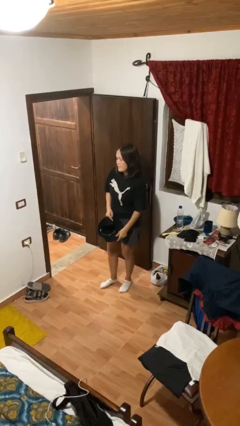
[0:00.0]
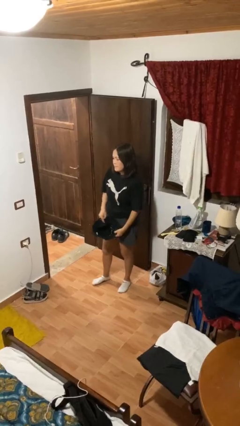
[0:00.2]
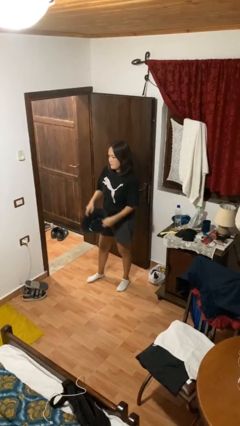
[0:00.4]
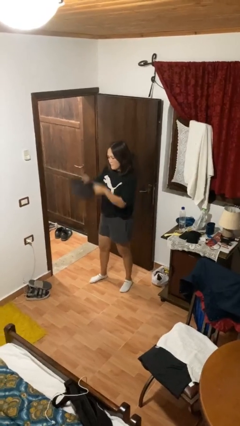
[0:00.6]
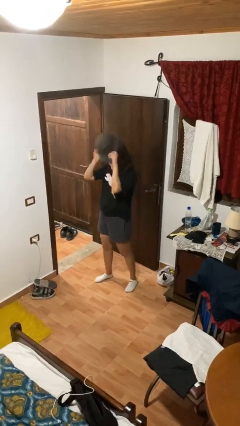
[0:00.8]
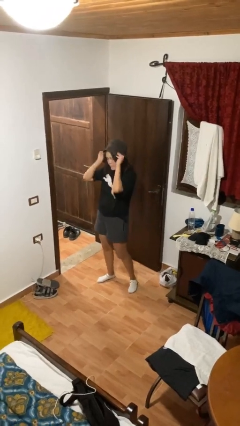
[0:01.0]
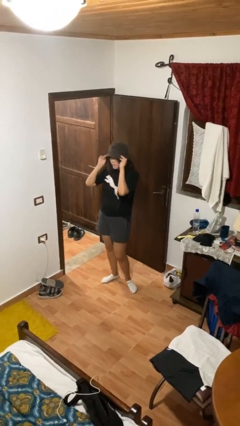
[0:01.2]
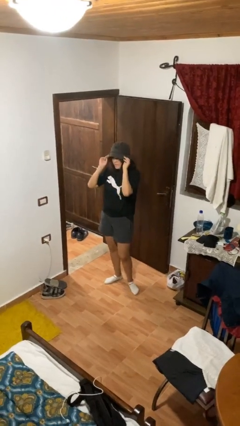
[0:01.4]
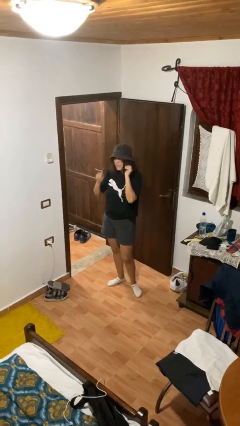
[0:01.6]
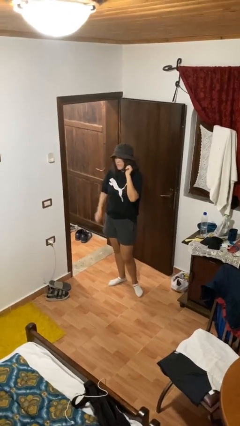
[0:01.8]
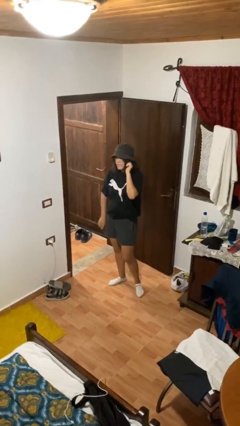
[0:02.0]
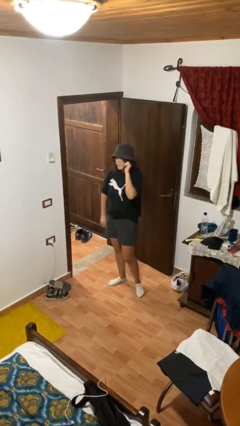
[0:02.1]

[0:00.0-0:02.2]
person puts on hat

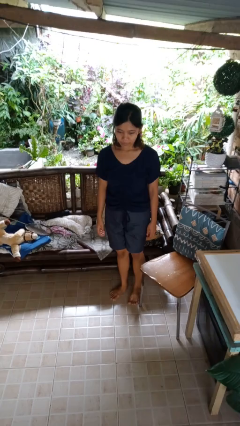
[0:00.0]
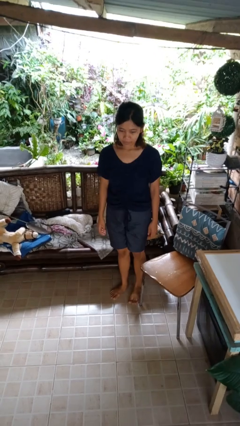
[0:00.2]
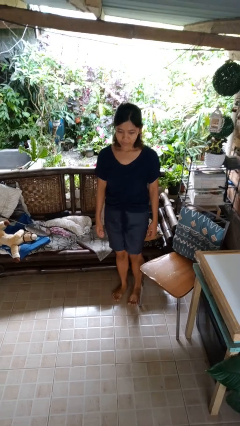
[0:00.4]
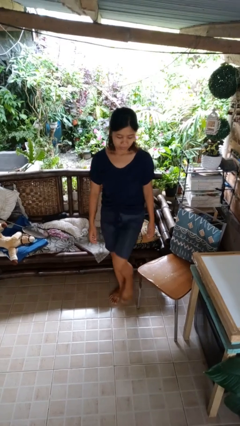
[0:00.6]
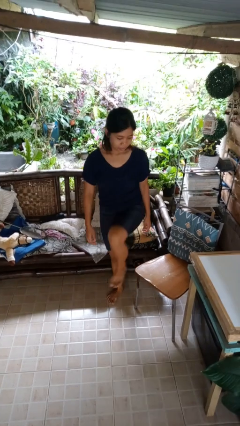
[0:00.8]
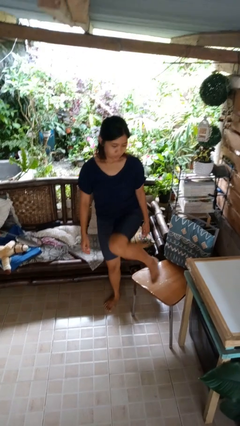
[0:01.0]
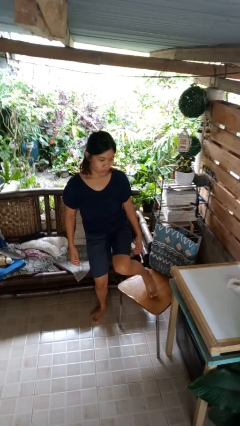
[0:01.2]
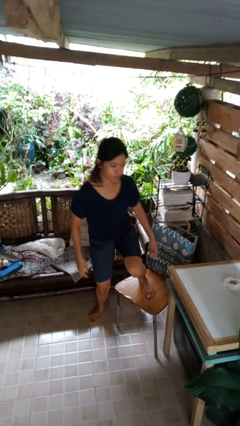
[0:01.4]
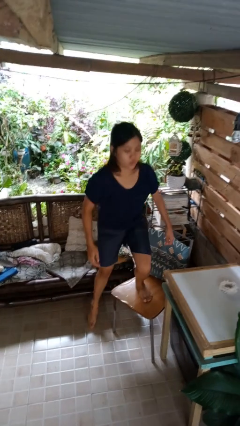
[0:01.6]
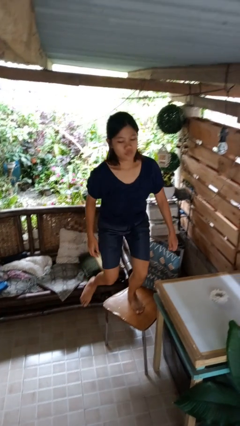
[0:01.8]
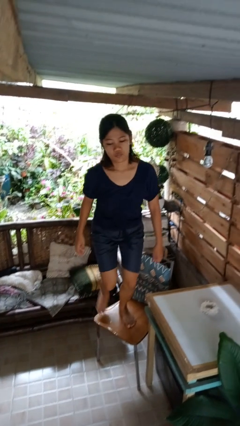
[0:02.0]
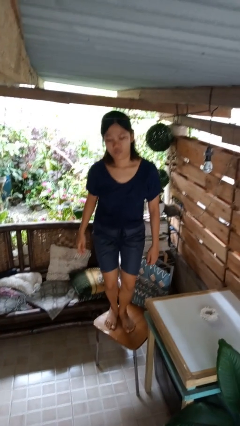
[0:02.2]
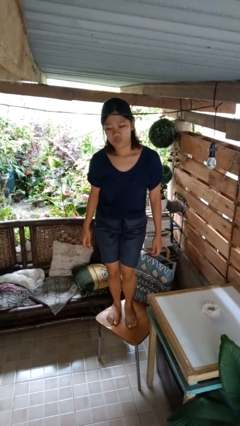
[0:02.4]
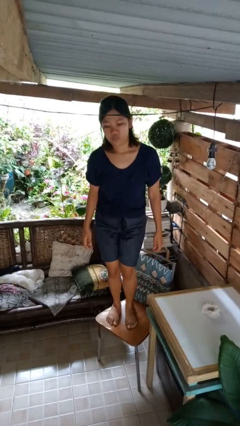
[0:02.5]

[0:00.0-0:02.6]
person climbs on chair

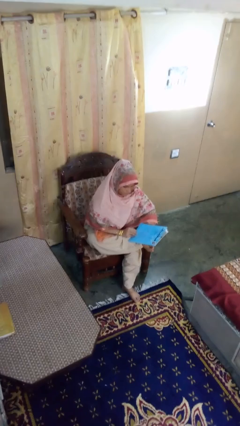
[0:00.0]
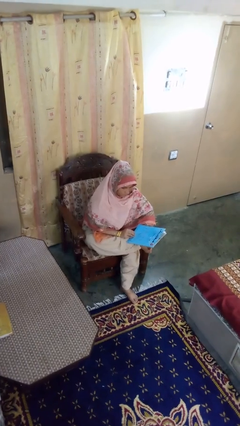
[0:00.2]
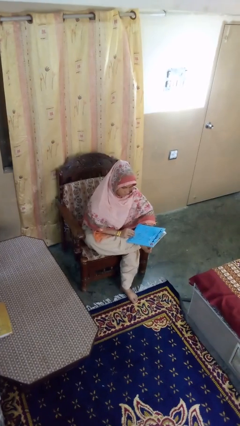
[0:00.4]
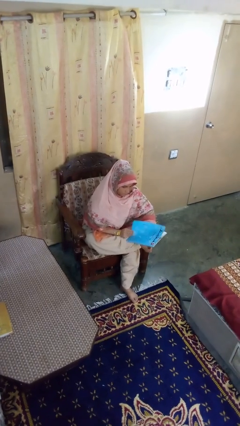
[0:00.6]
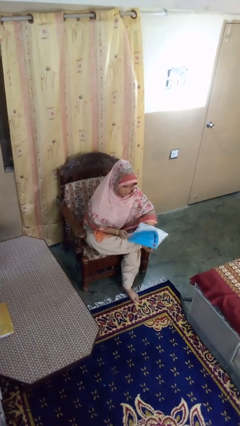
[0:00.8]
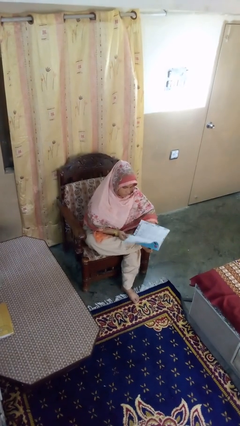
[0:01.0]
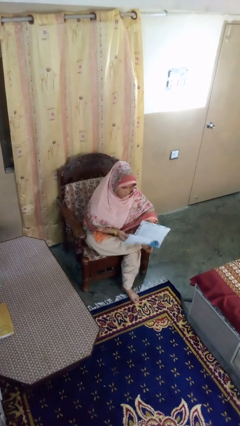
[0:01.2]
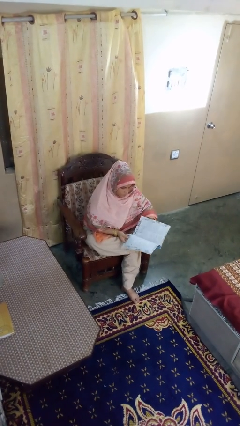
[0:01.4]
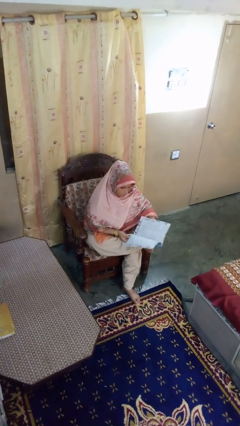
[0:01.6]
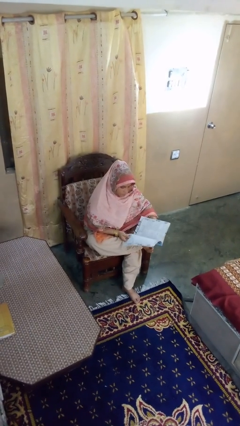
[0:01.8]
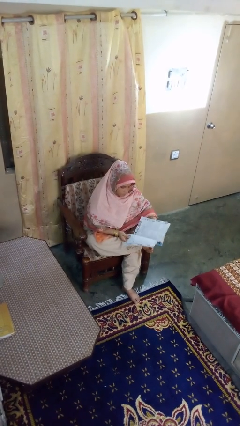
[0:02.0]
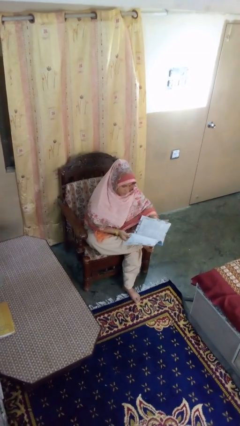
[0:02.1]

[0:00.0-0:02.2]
person reads magazine

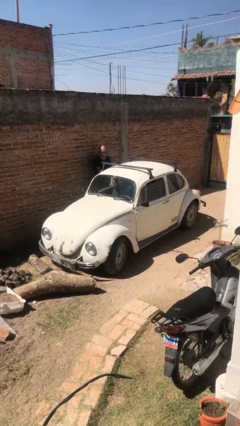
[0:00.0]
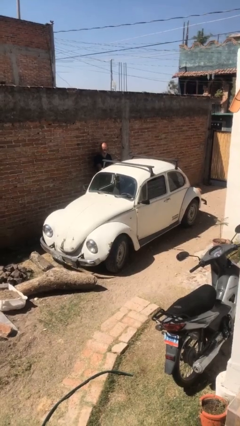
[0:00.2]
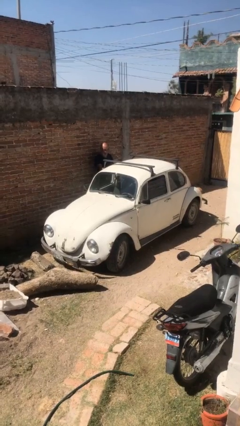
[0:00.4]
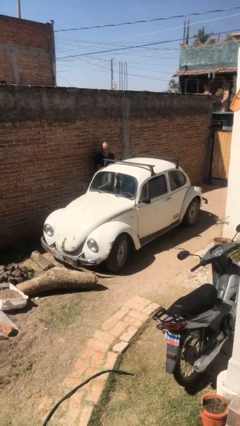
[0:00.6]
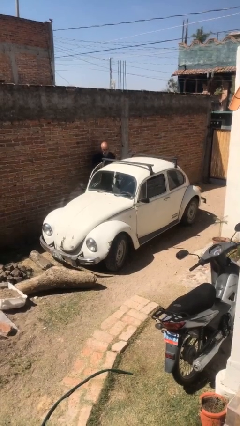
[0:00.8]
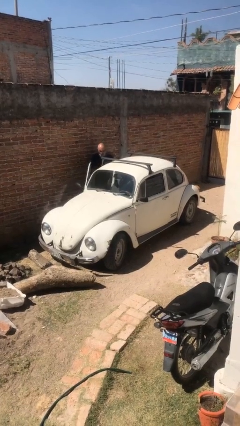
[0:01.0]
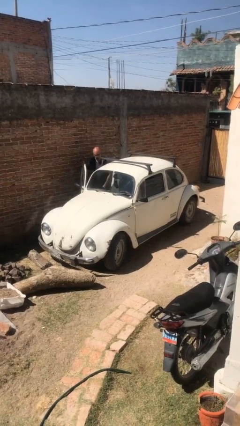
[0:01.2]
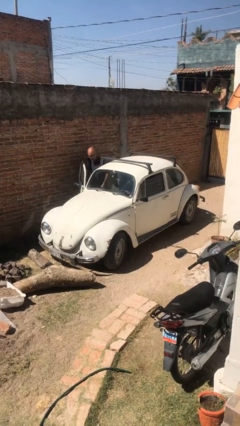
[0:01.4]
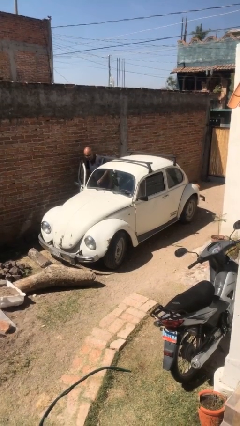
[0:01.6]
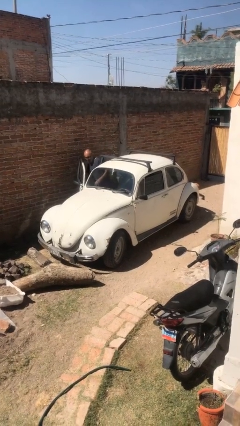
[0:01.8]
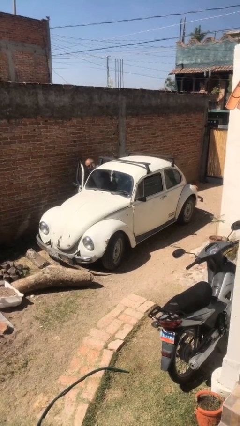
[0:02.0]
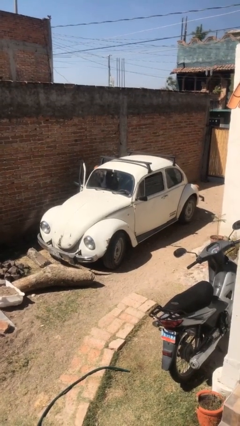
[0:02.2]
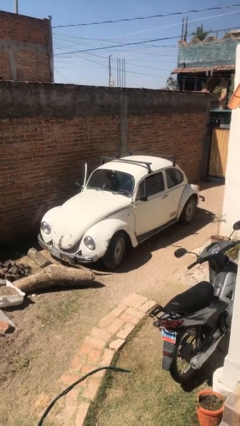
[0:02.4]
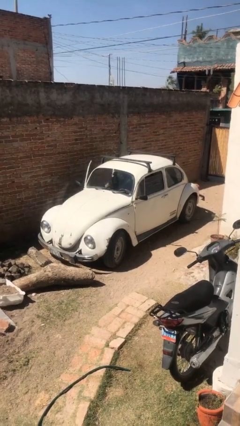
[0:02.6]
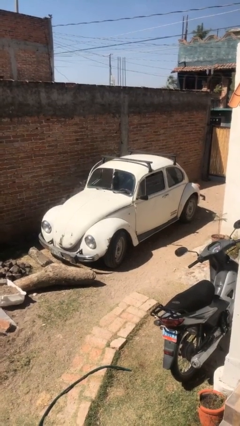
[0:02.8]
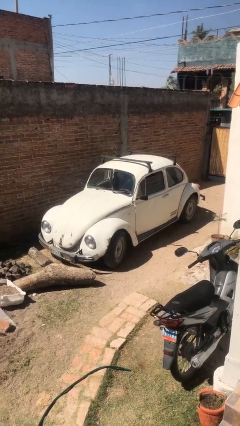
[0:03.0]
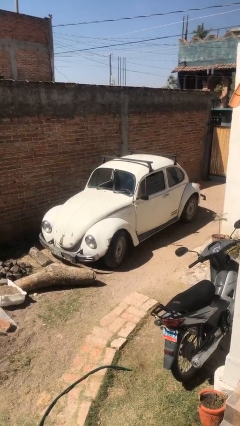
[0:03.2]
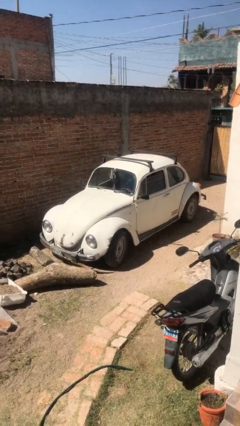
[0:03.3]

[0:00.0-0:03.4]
car picks up person

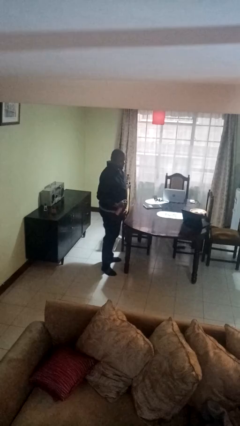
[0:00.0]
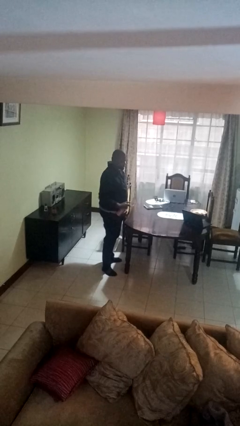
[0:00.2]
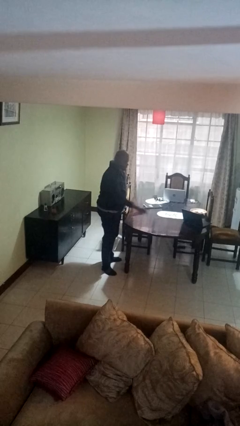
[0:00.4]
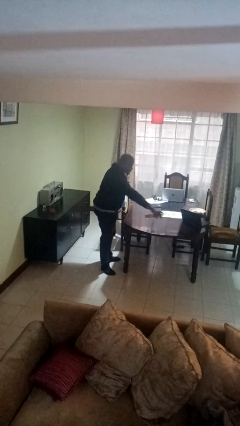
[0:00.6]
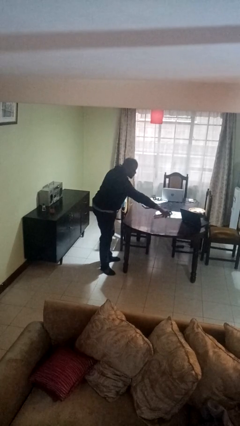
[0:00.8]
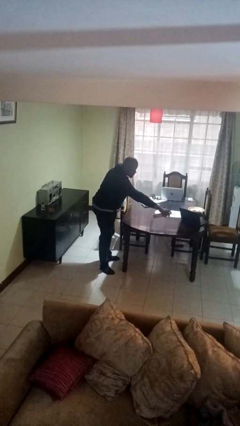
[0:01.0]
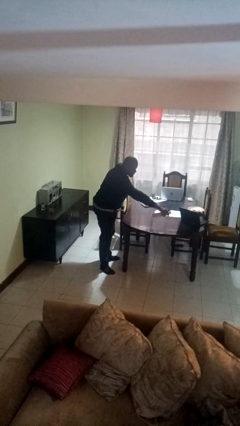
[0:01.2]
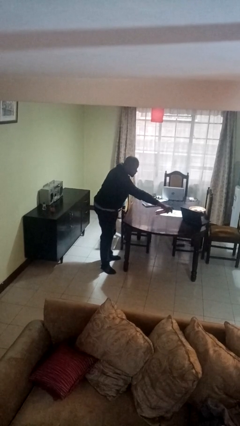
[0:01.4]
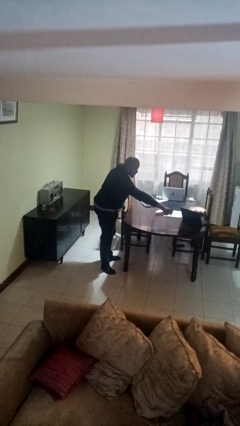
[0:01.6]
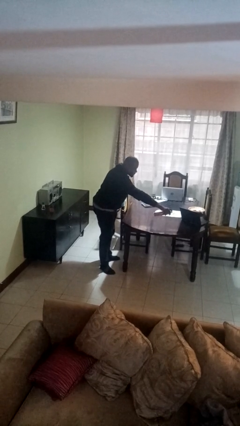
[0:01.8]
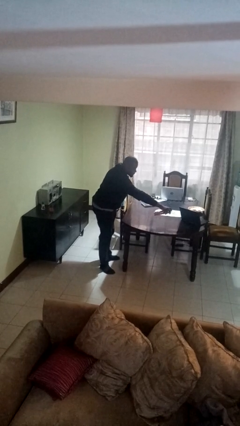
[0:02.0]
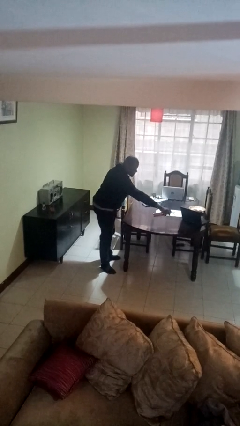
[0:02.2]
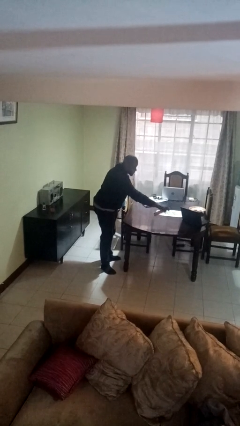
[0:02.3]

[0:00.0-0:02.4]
person sprays from bottle

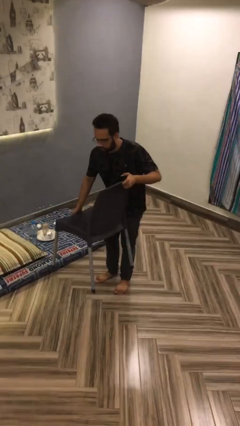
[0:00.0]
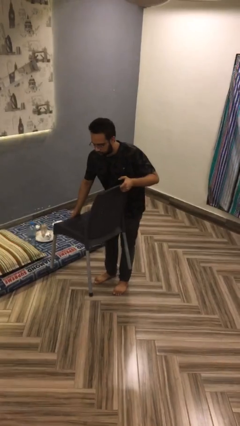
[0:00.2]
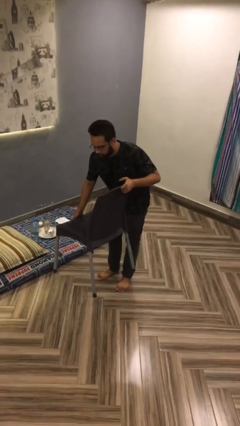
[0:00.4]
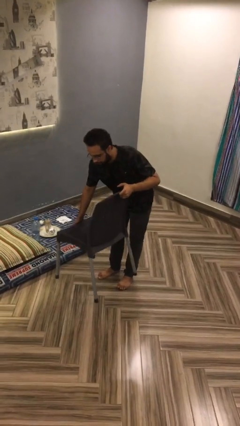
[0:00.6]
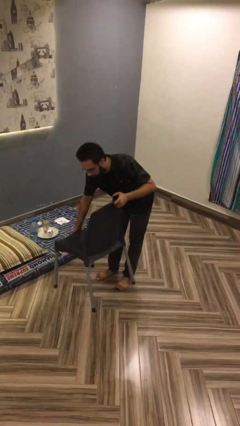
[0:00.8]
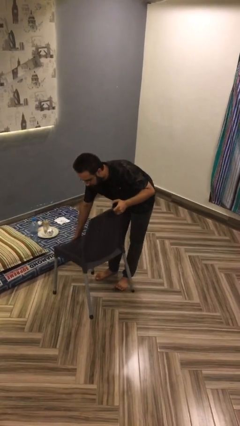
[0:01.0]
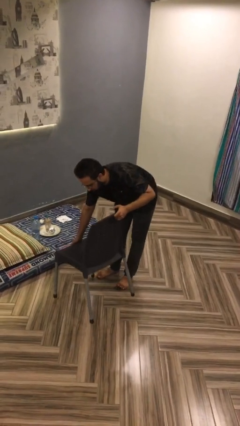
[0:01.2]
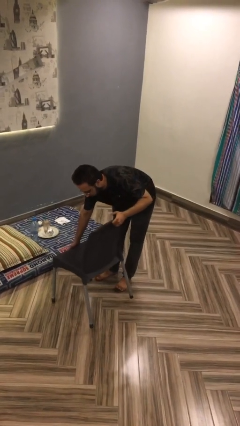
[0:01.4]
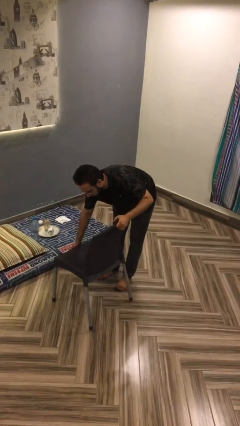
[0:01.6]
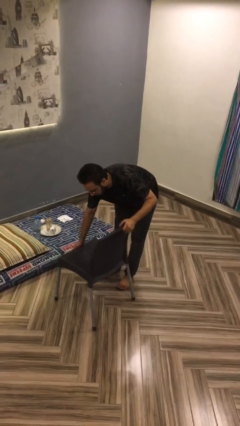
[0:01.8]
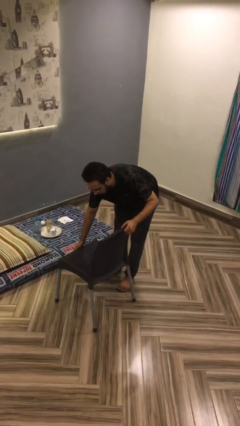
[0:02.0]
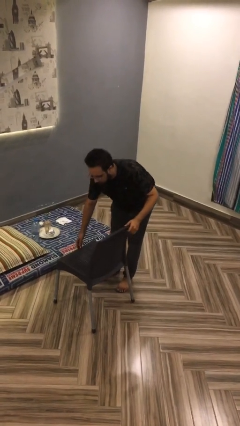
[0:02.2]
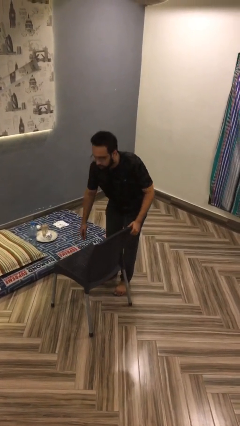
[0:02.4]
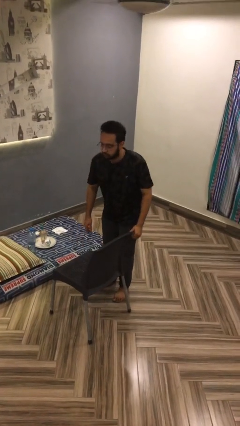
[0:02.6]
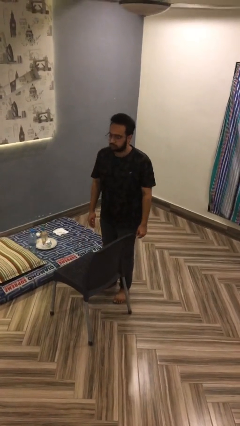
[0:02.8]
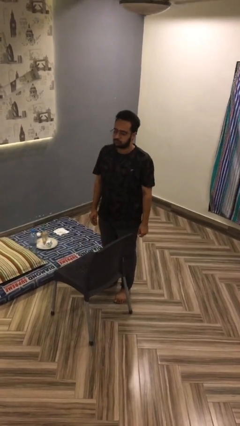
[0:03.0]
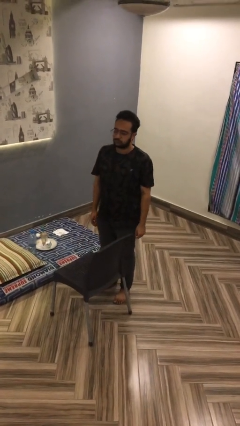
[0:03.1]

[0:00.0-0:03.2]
person puts down object on floor

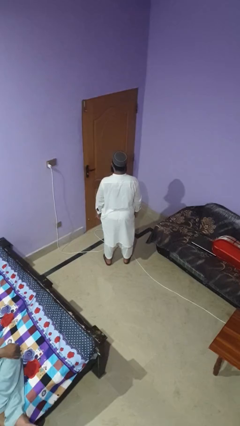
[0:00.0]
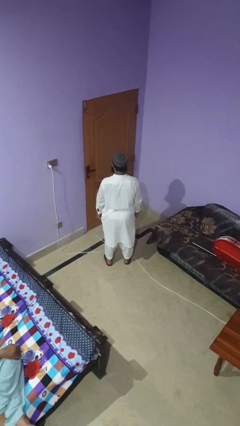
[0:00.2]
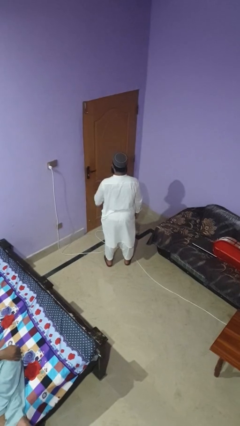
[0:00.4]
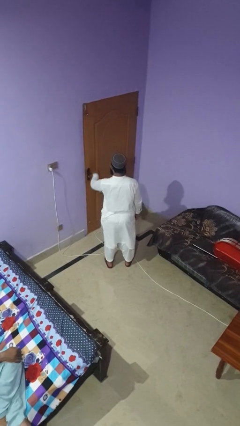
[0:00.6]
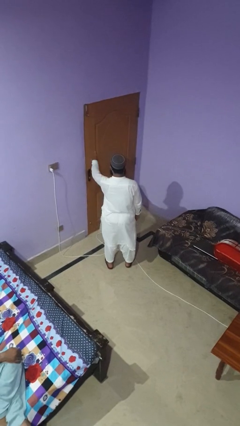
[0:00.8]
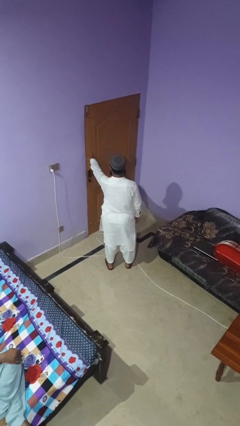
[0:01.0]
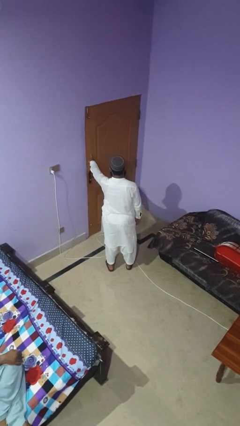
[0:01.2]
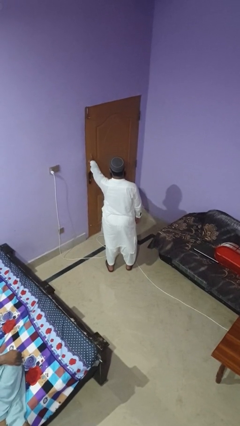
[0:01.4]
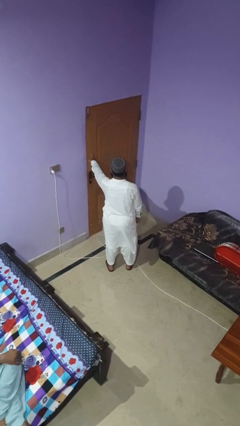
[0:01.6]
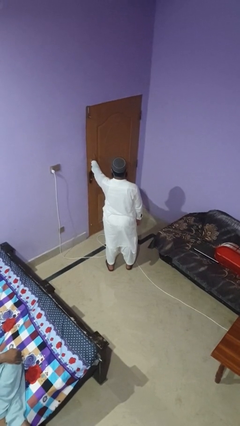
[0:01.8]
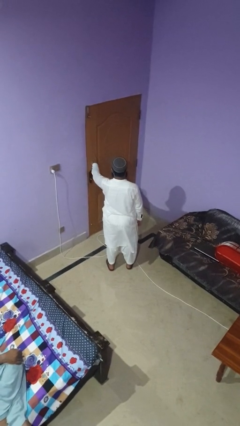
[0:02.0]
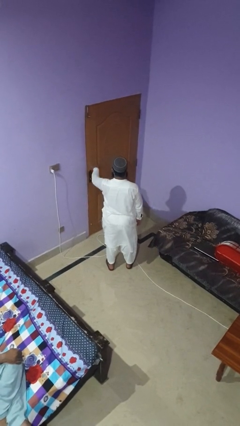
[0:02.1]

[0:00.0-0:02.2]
person taps object with finger
